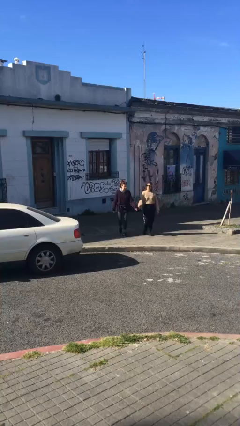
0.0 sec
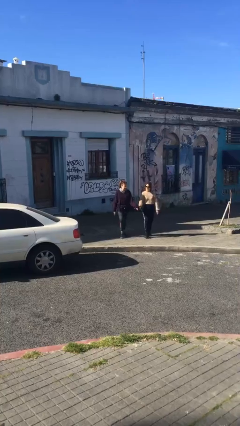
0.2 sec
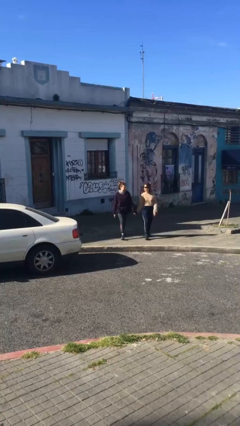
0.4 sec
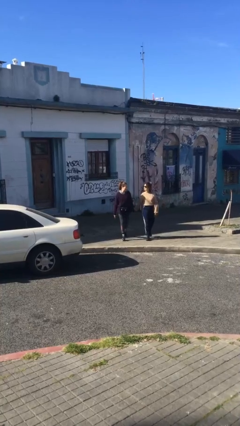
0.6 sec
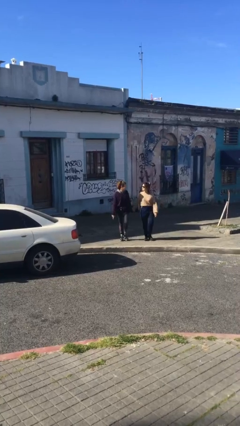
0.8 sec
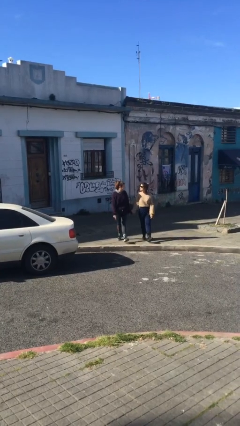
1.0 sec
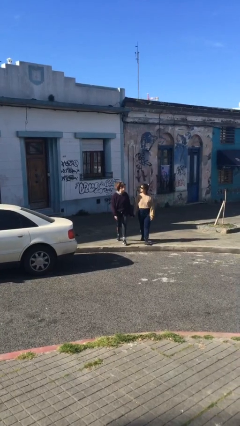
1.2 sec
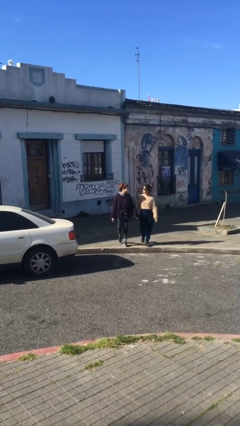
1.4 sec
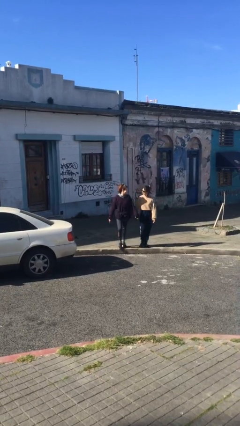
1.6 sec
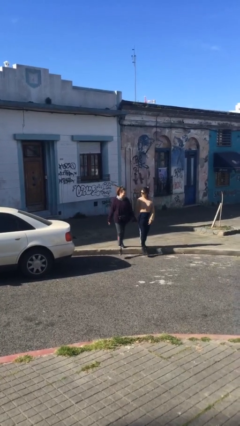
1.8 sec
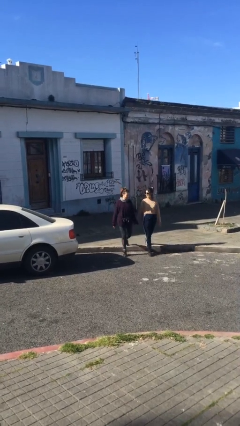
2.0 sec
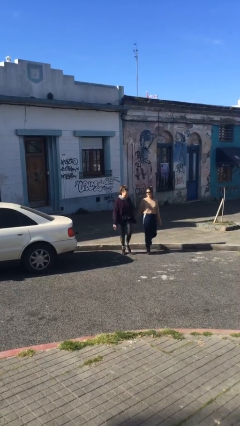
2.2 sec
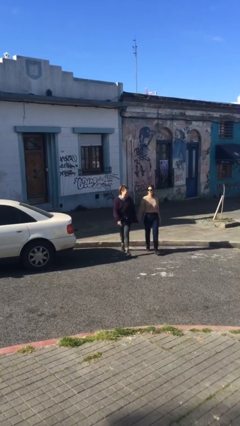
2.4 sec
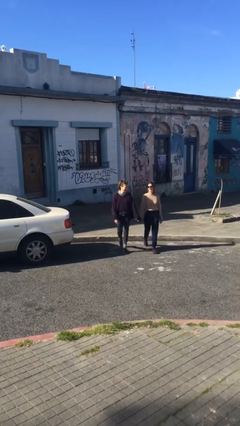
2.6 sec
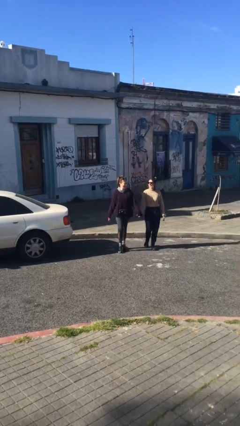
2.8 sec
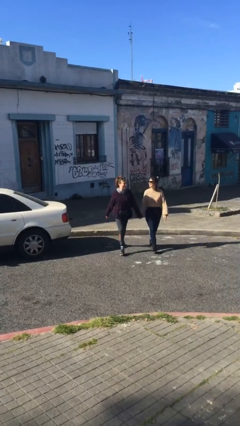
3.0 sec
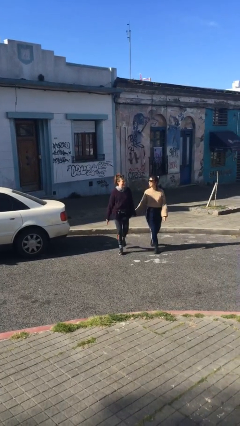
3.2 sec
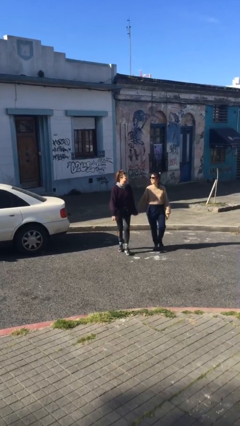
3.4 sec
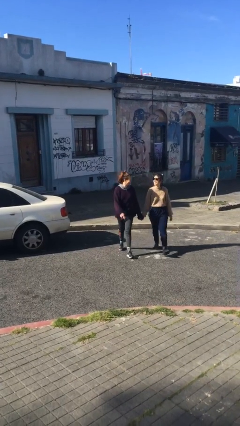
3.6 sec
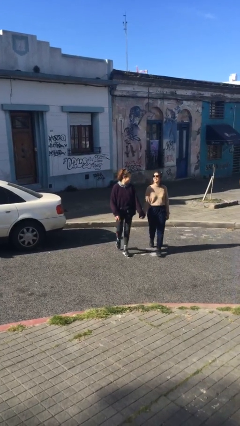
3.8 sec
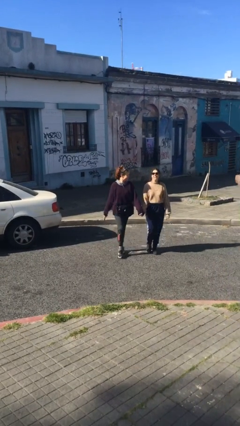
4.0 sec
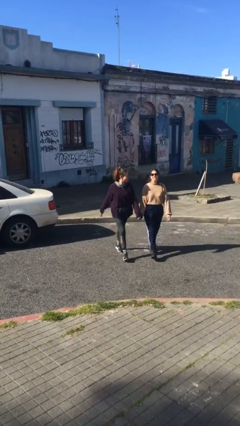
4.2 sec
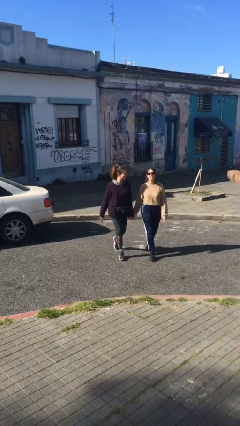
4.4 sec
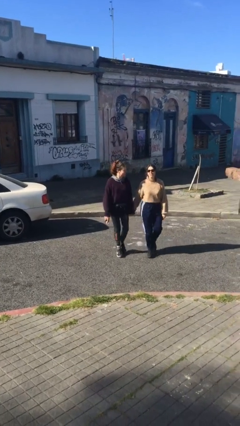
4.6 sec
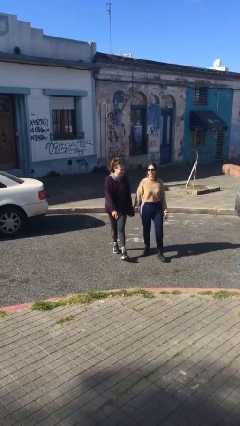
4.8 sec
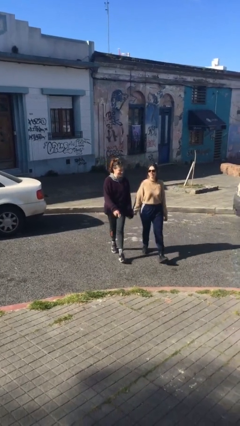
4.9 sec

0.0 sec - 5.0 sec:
person holds hand

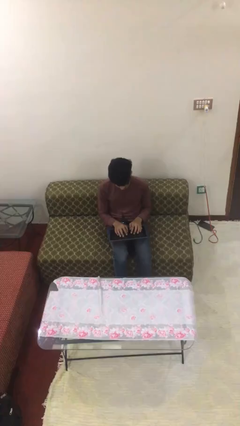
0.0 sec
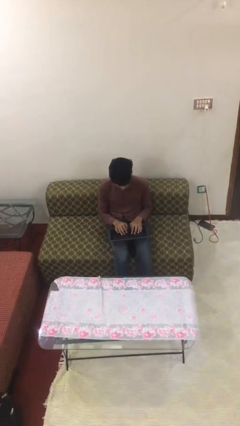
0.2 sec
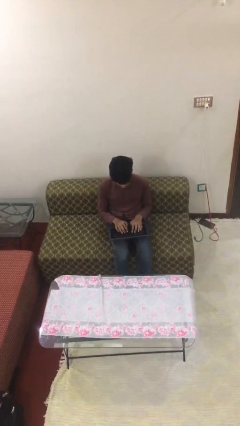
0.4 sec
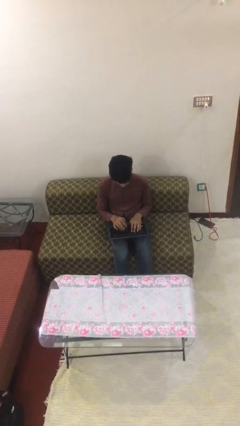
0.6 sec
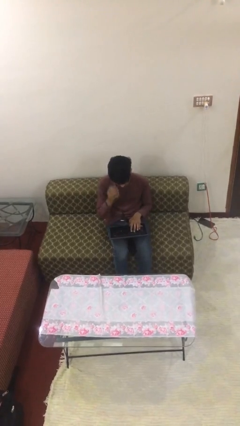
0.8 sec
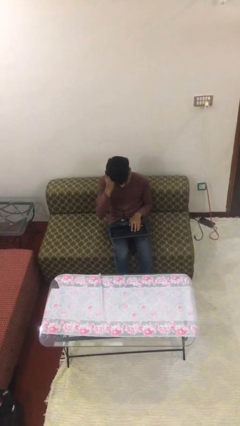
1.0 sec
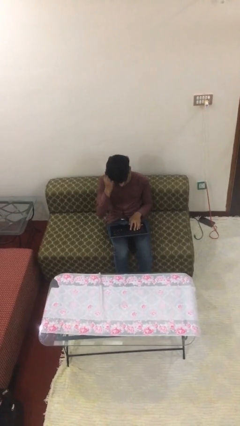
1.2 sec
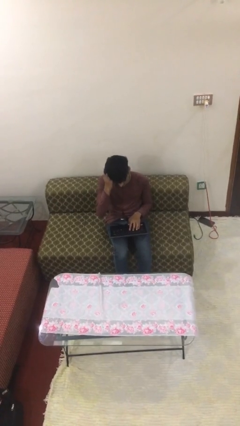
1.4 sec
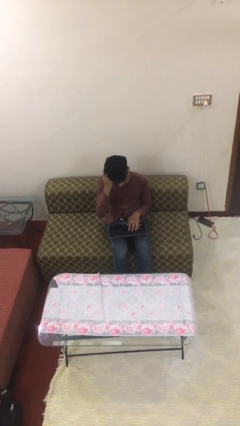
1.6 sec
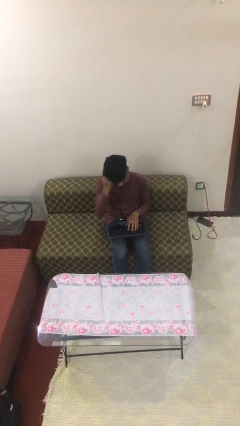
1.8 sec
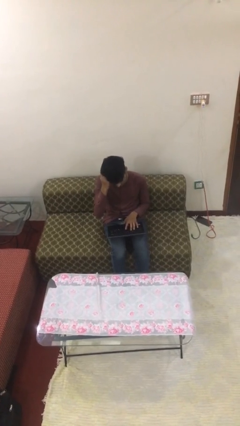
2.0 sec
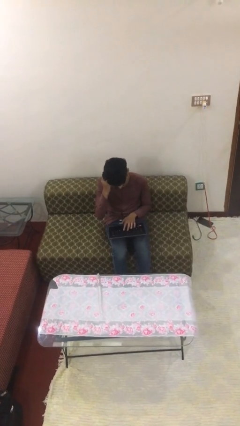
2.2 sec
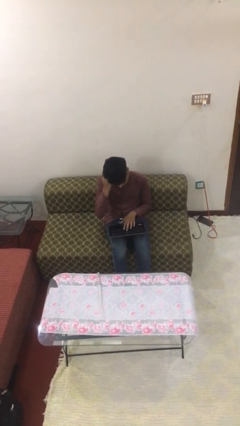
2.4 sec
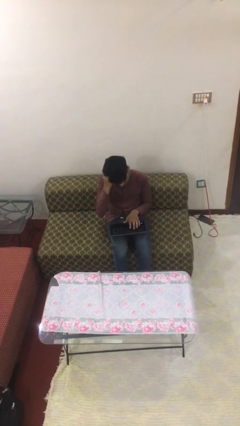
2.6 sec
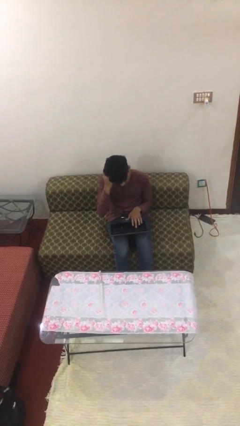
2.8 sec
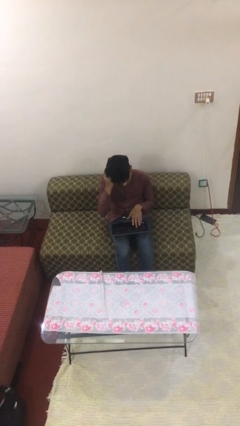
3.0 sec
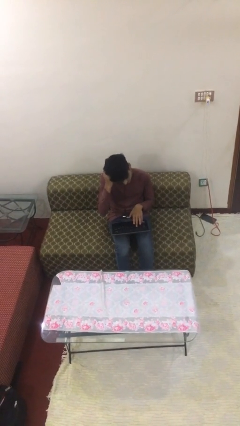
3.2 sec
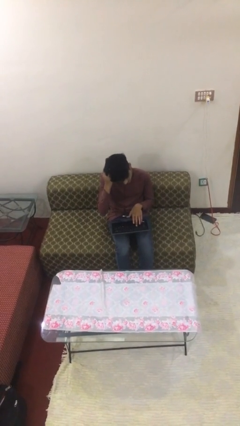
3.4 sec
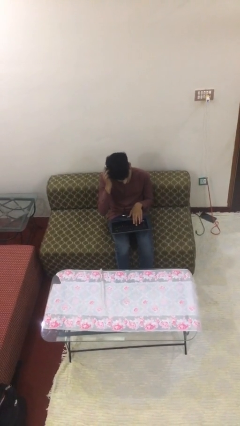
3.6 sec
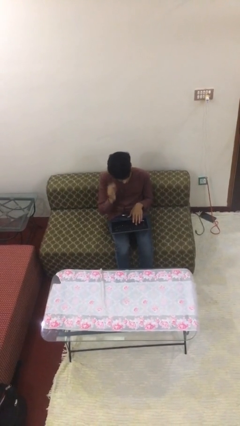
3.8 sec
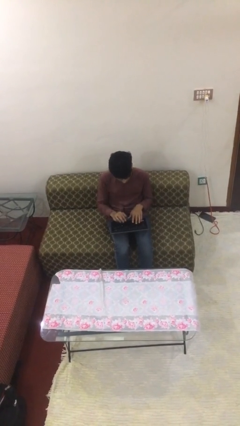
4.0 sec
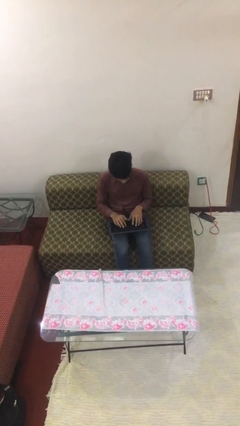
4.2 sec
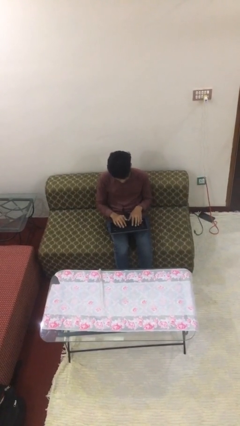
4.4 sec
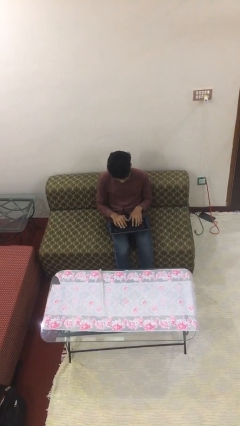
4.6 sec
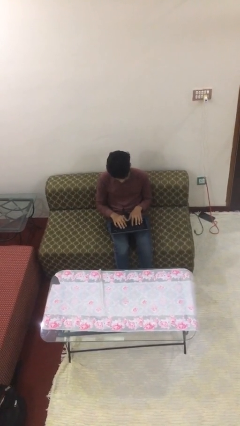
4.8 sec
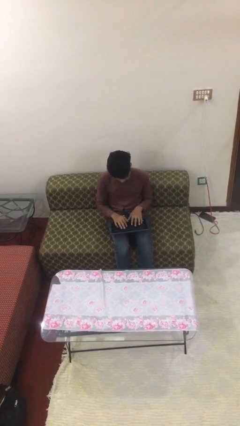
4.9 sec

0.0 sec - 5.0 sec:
person interacts with laptop

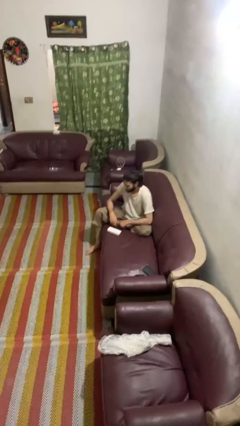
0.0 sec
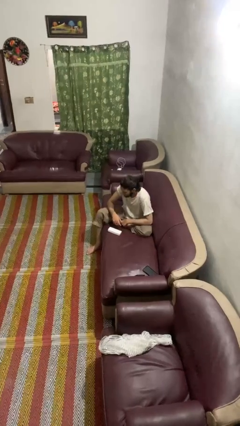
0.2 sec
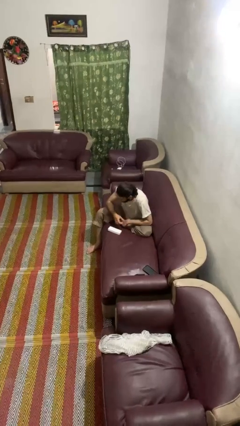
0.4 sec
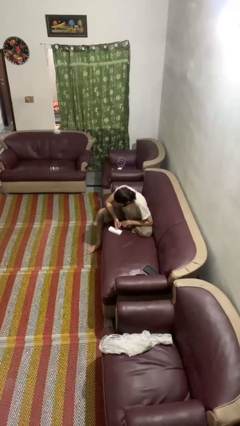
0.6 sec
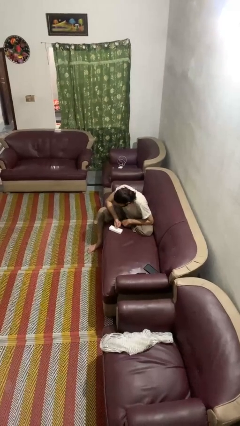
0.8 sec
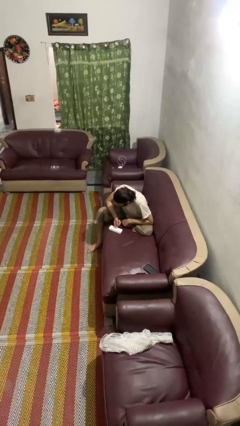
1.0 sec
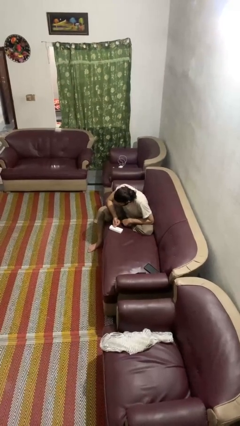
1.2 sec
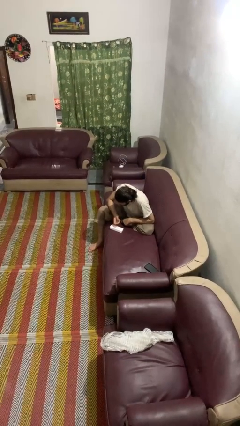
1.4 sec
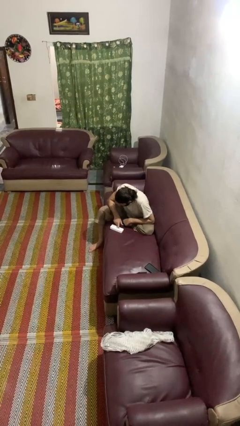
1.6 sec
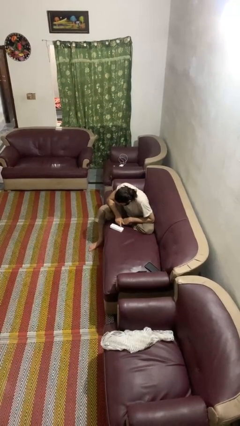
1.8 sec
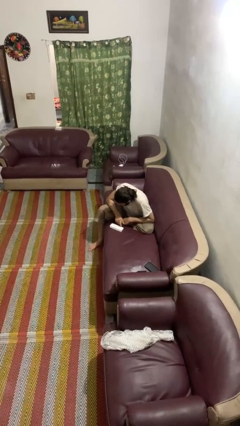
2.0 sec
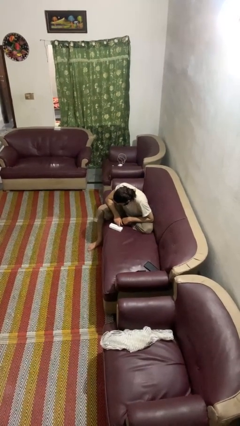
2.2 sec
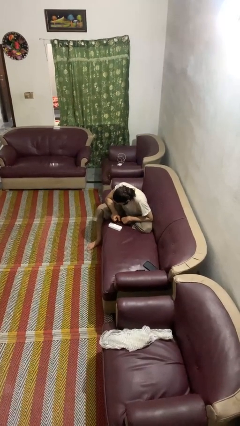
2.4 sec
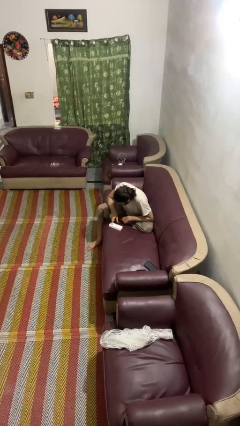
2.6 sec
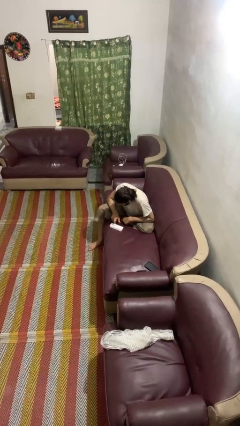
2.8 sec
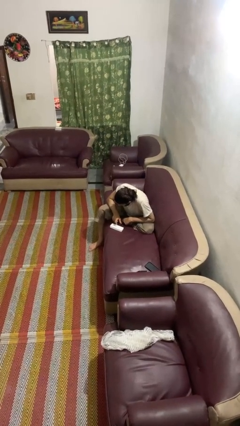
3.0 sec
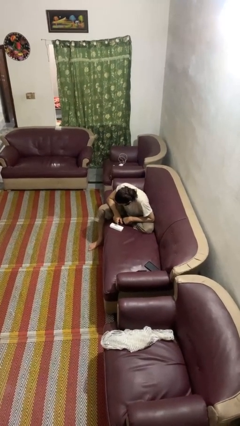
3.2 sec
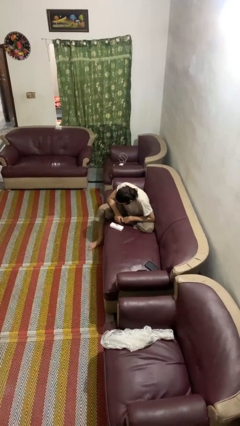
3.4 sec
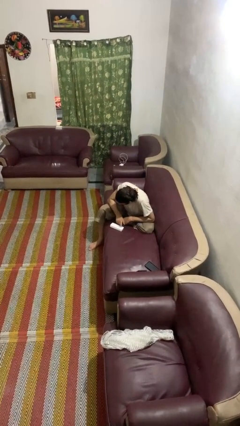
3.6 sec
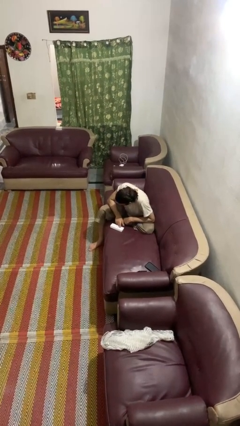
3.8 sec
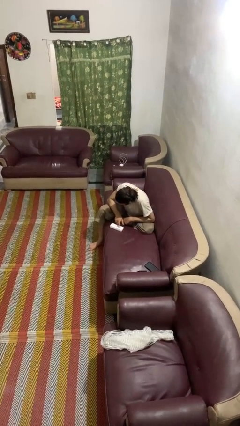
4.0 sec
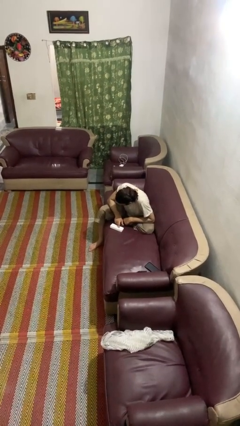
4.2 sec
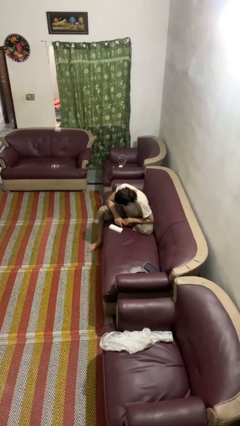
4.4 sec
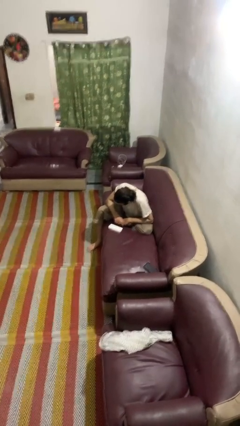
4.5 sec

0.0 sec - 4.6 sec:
person taps object with finger

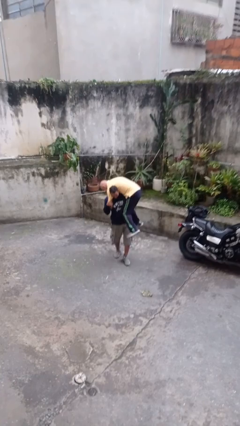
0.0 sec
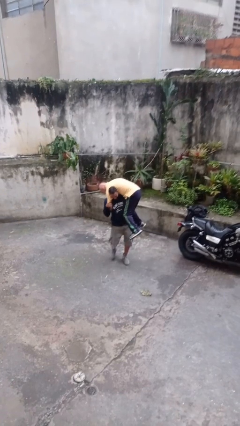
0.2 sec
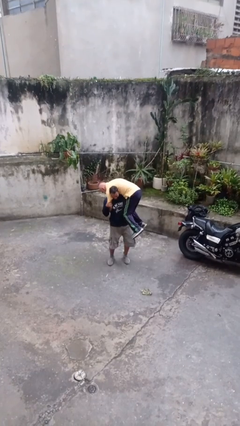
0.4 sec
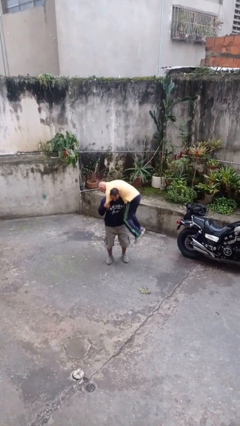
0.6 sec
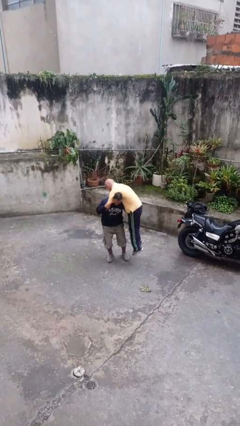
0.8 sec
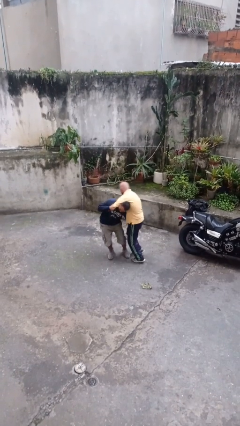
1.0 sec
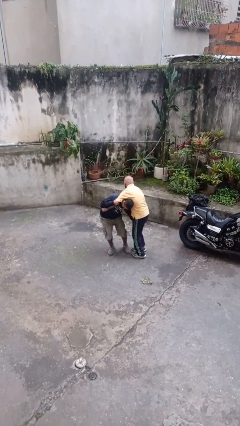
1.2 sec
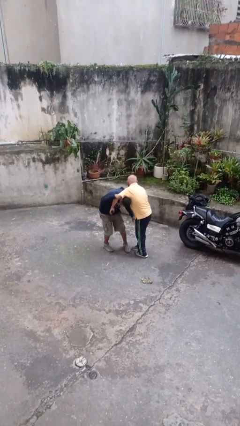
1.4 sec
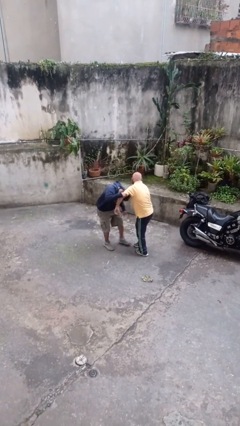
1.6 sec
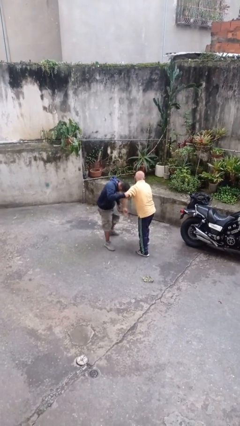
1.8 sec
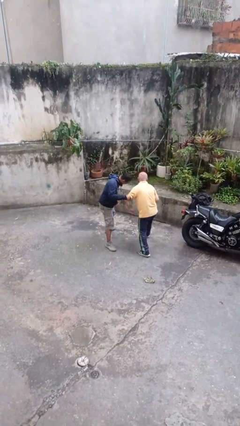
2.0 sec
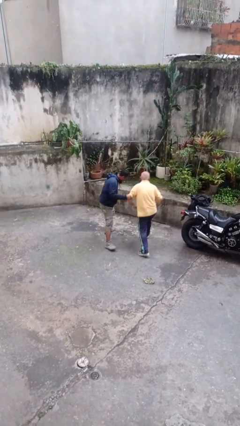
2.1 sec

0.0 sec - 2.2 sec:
person puts down person

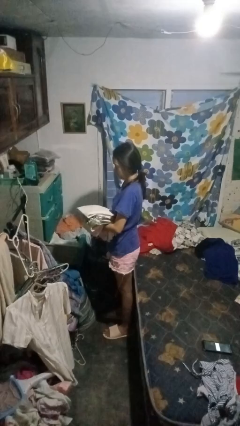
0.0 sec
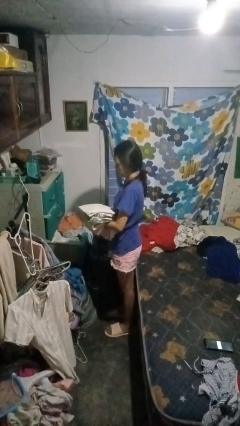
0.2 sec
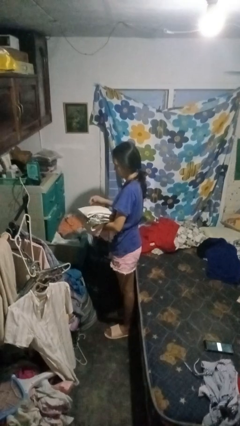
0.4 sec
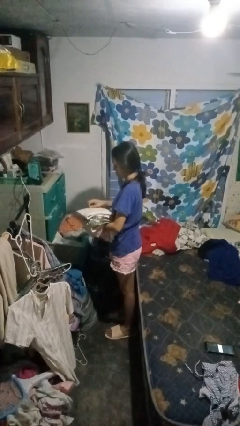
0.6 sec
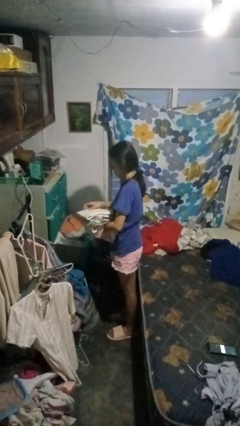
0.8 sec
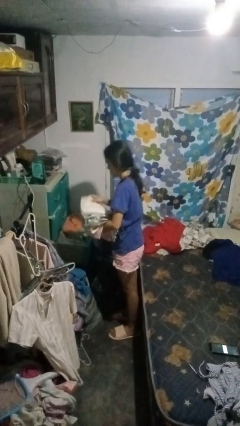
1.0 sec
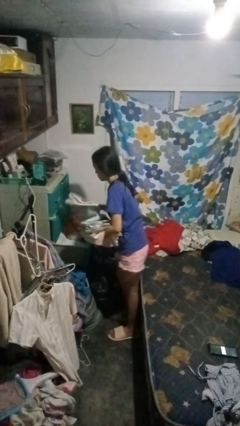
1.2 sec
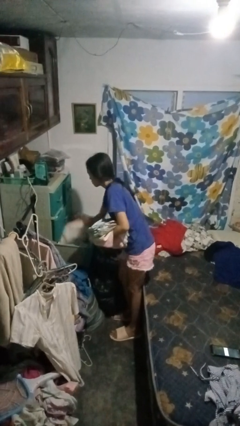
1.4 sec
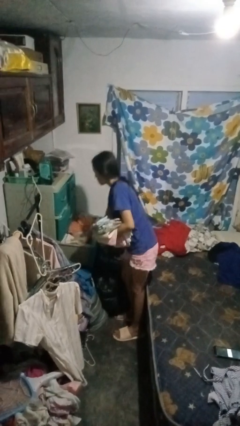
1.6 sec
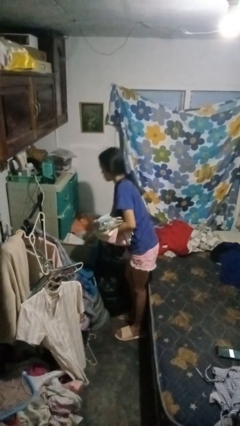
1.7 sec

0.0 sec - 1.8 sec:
person puts clothes into dresser
